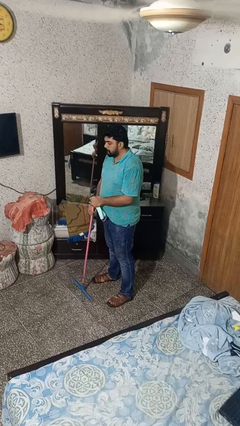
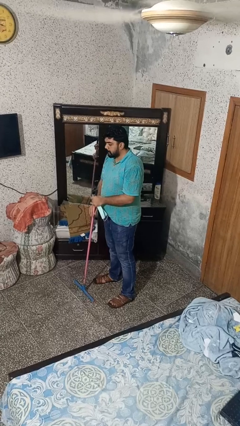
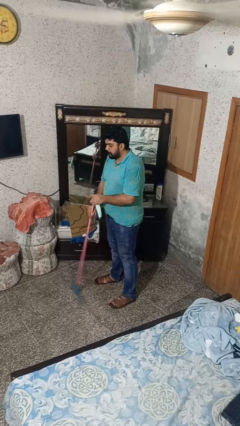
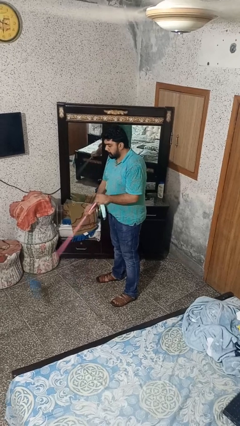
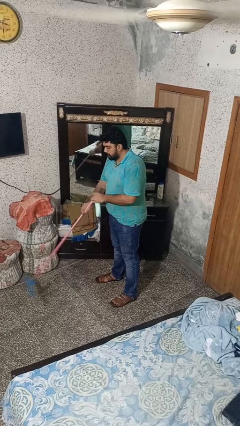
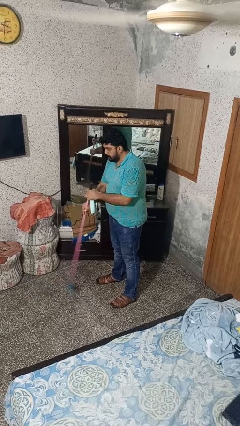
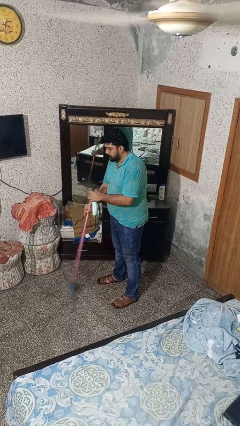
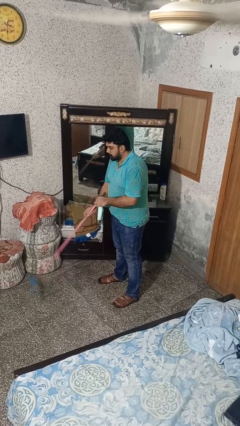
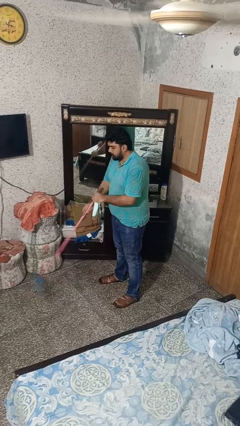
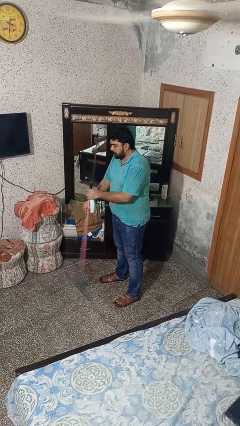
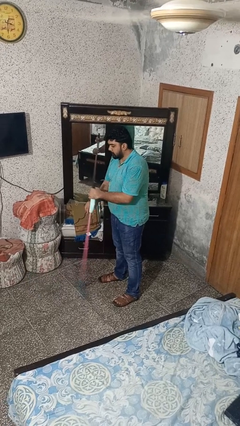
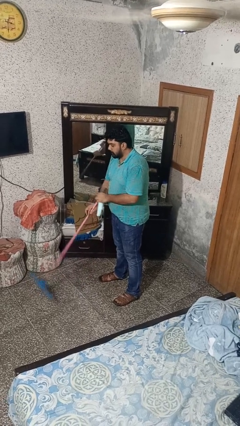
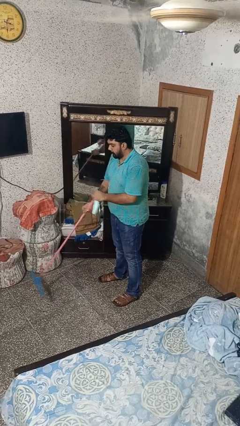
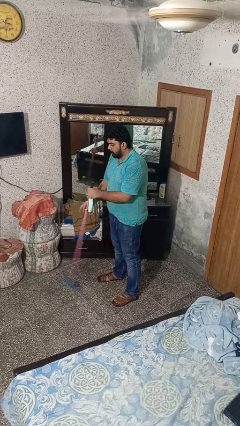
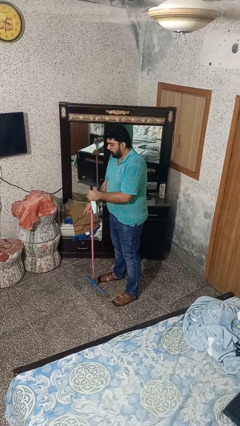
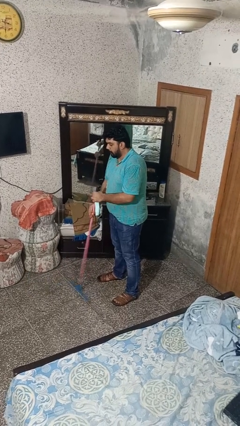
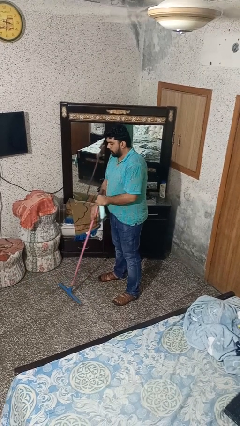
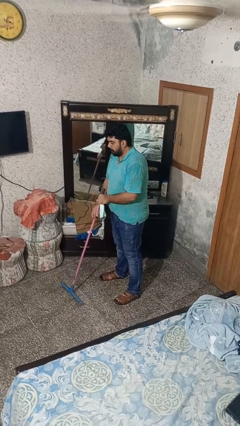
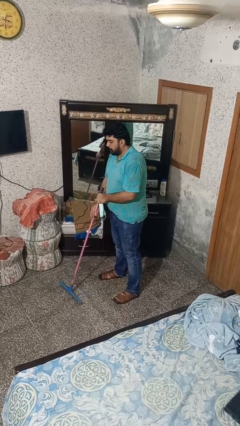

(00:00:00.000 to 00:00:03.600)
person sweeps floor

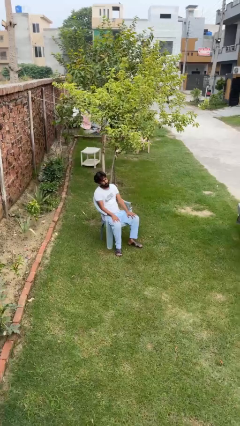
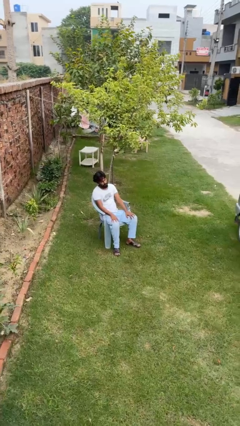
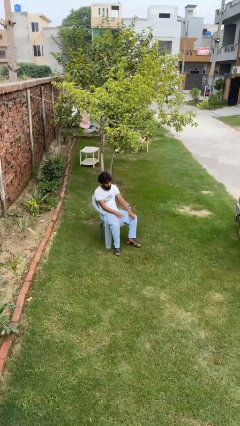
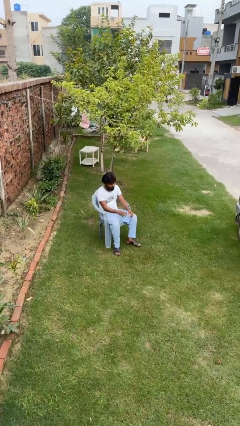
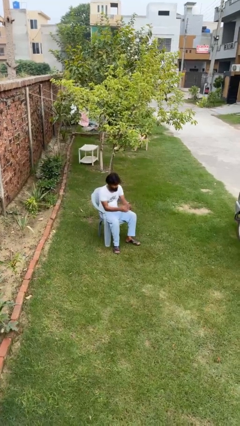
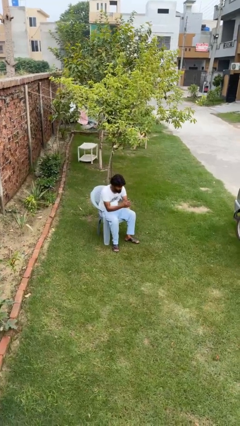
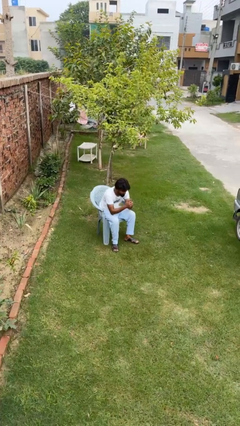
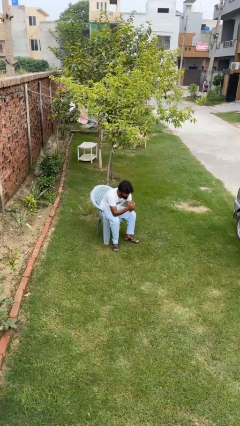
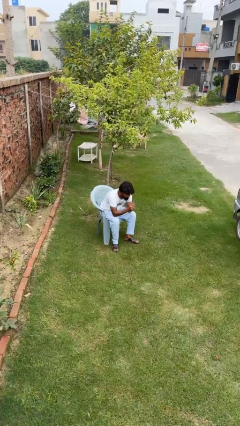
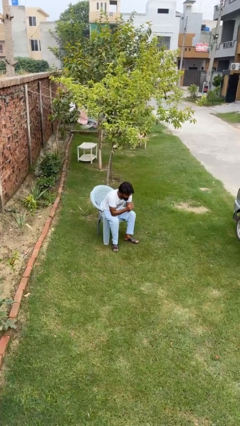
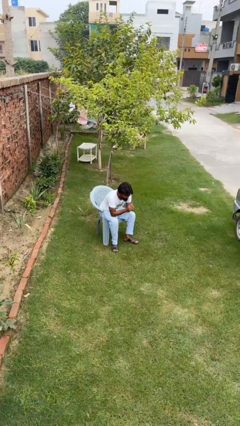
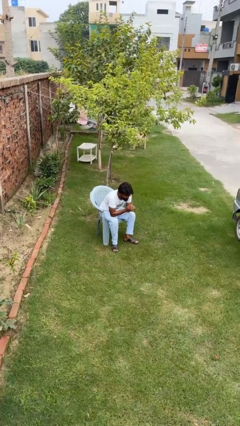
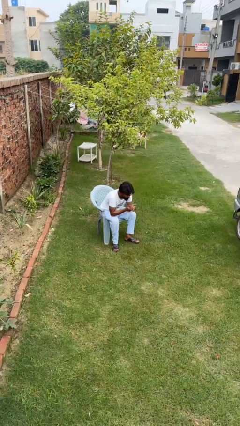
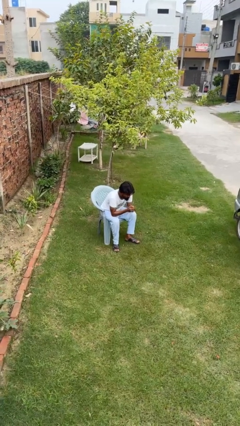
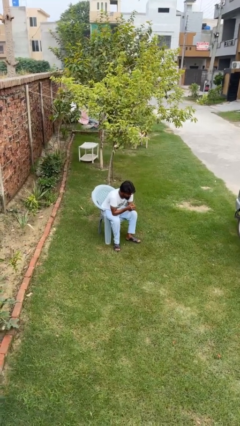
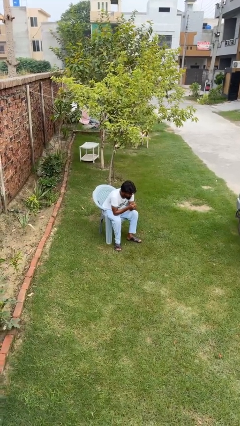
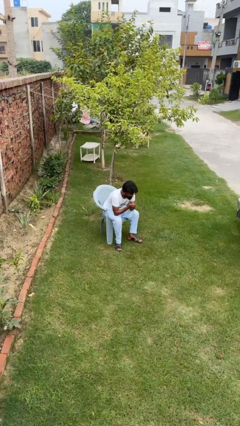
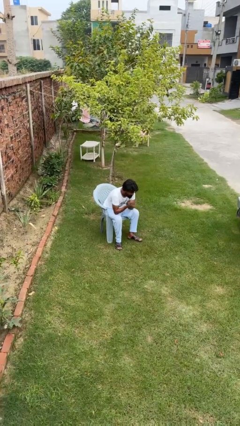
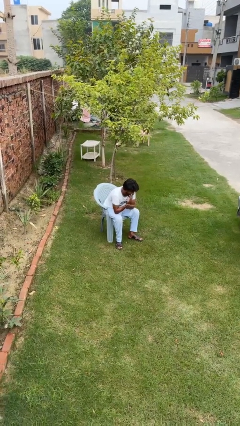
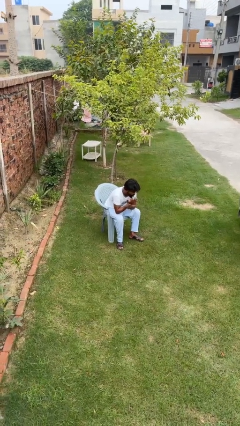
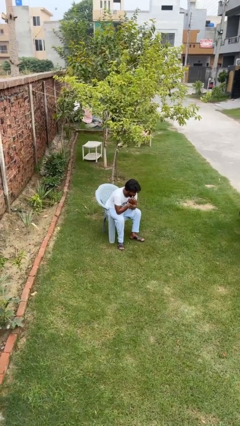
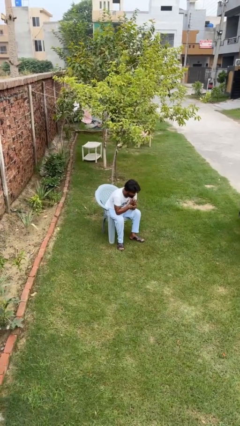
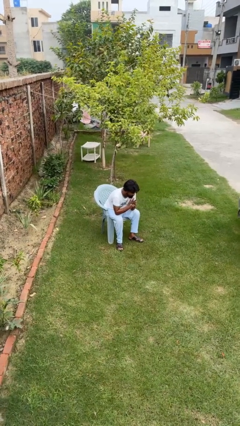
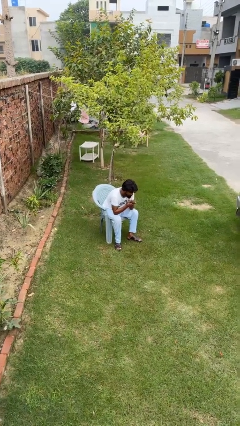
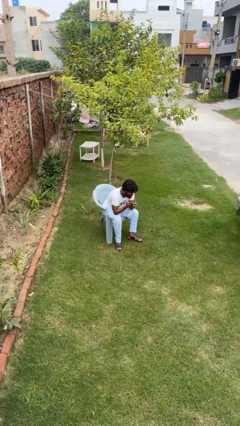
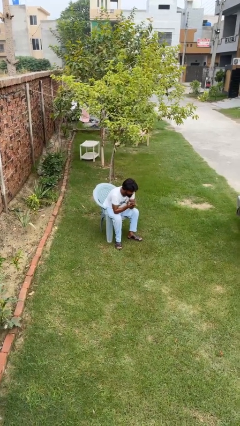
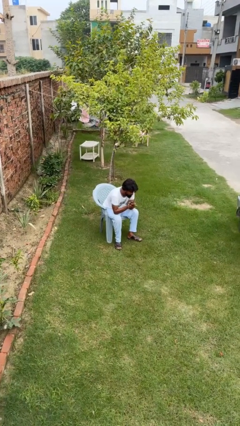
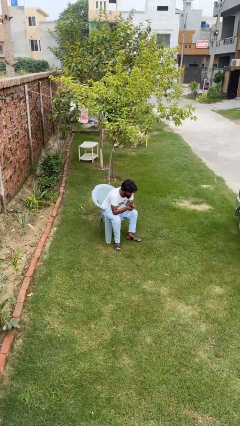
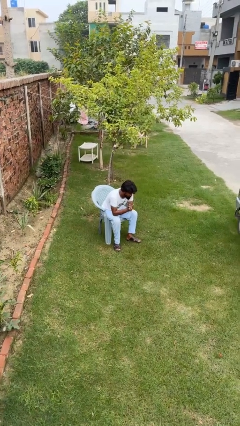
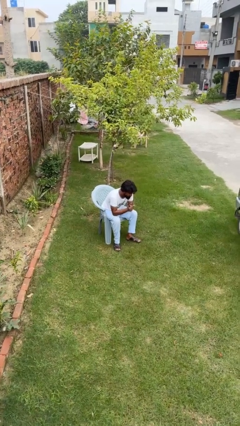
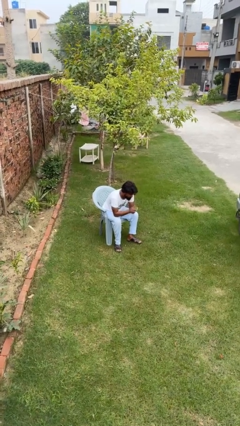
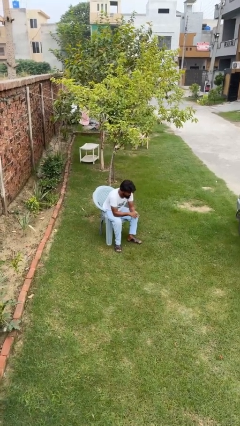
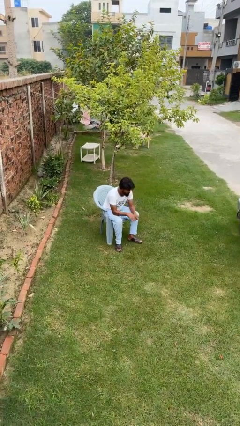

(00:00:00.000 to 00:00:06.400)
person looks at hands in lap

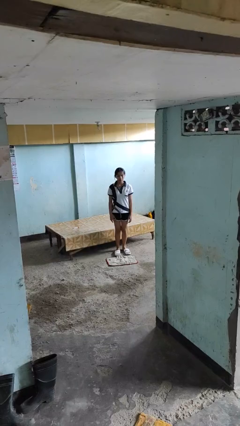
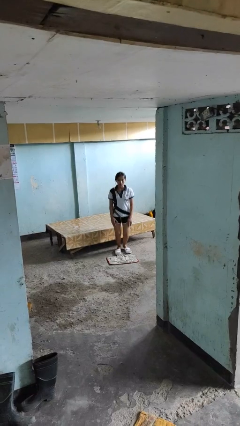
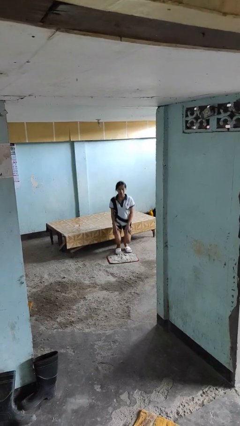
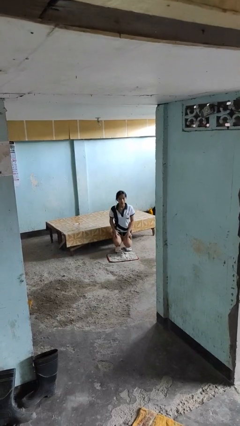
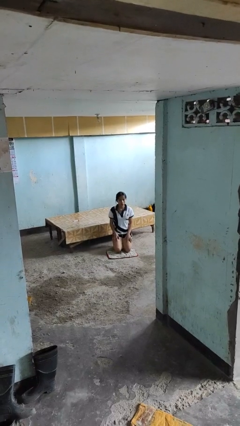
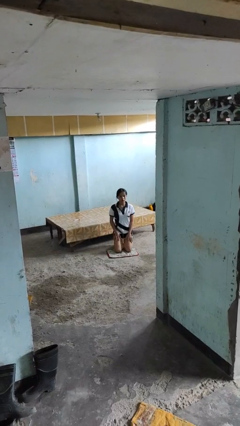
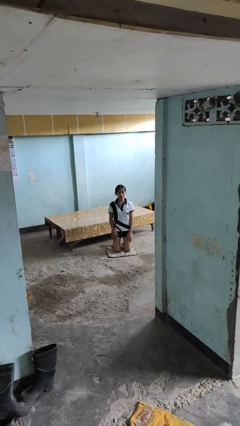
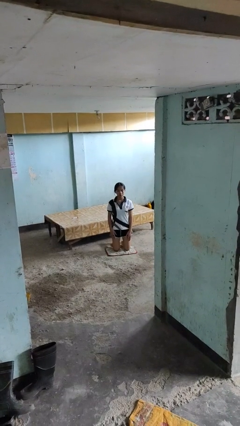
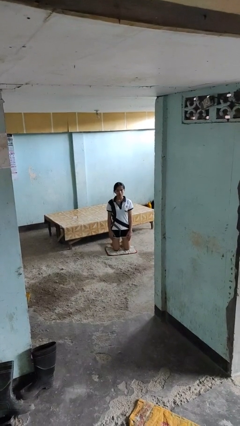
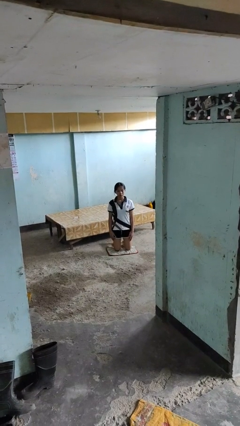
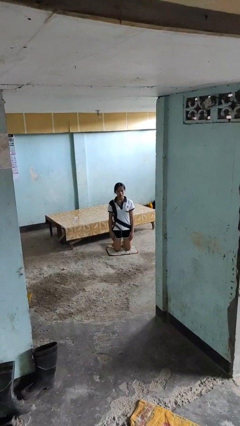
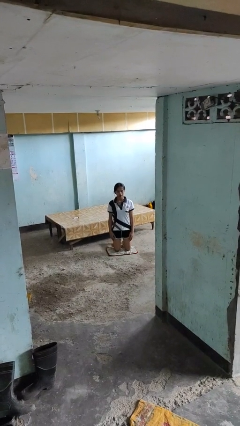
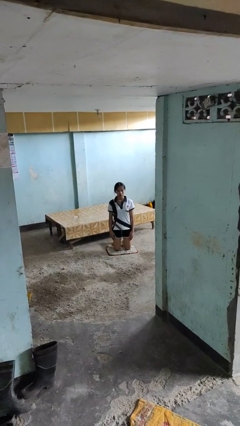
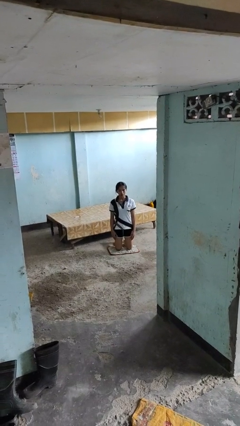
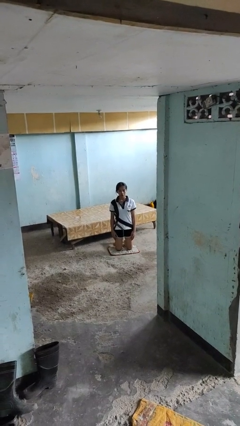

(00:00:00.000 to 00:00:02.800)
person kneels

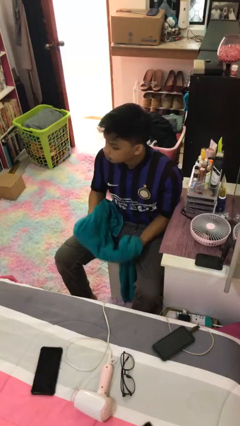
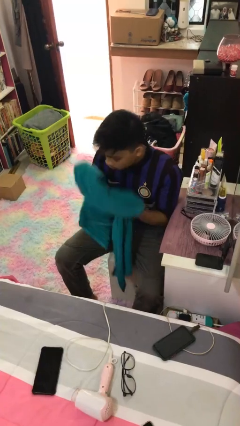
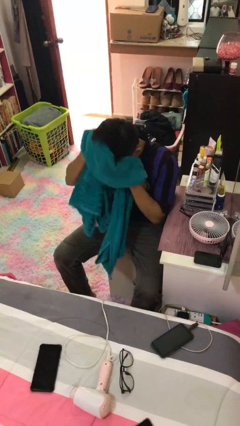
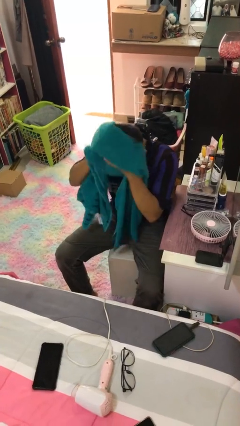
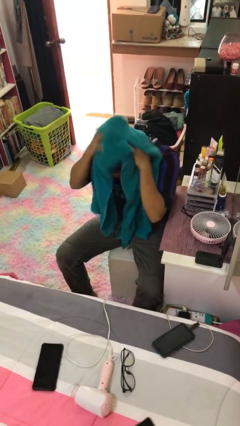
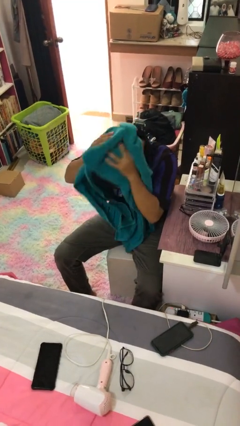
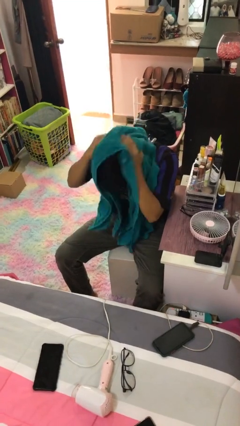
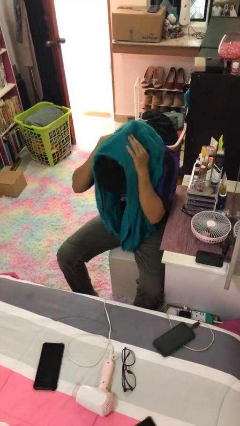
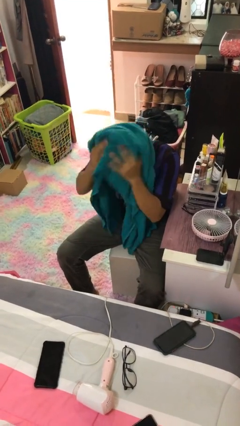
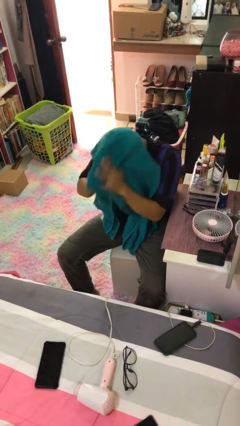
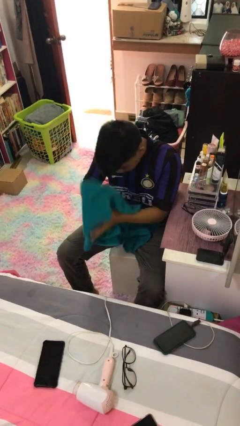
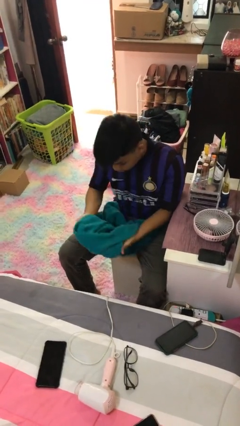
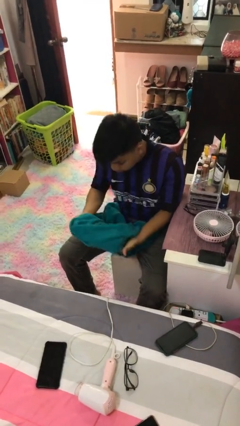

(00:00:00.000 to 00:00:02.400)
person dries hair with towel

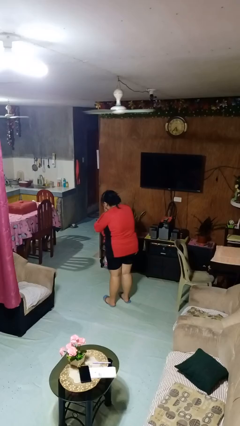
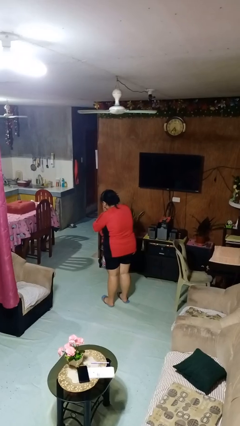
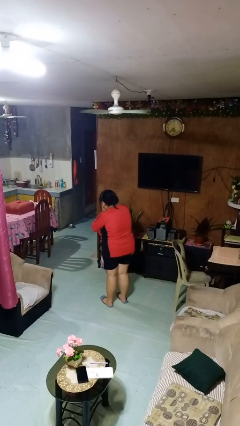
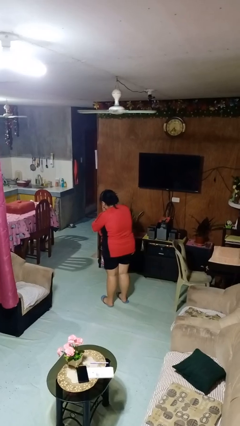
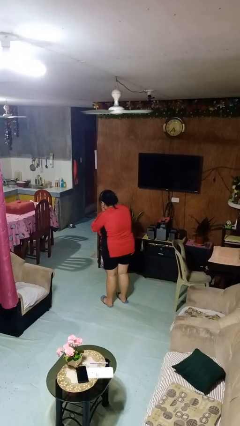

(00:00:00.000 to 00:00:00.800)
person sneezes into hand

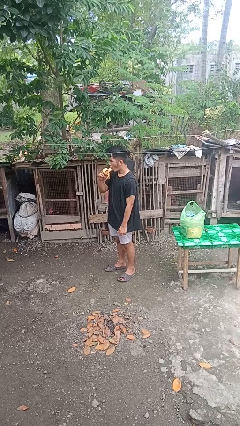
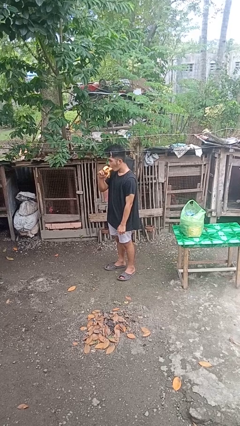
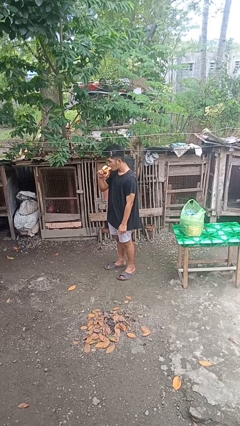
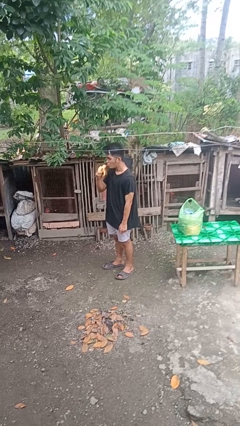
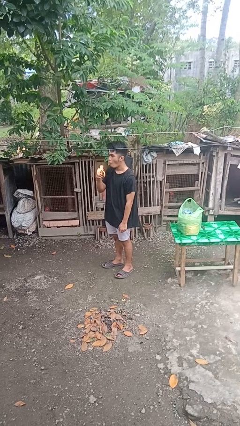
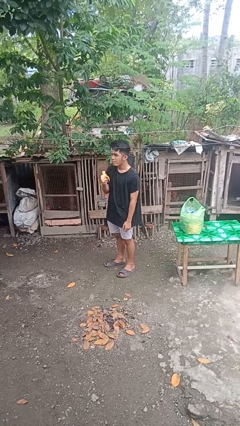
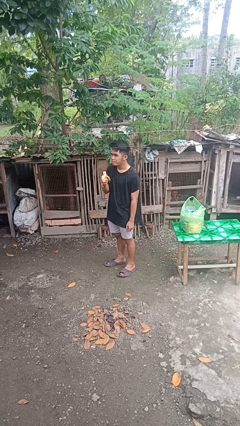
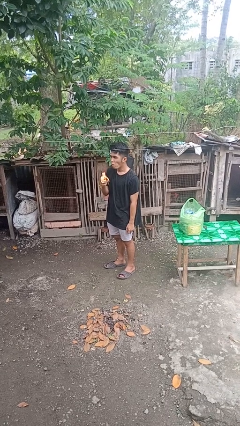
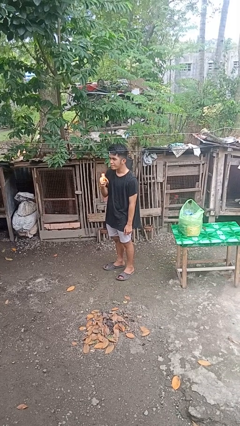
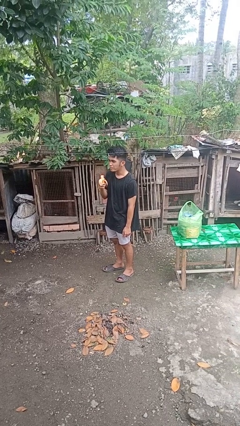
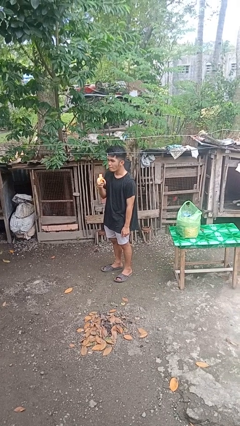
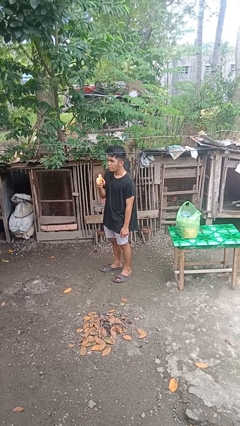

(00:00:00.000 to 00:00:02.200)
person eats banana
